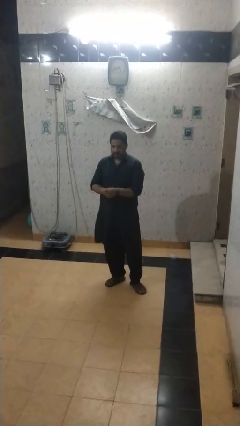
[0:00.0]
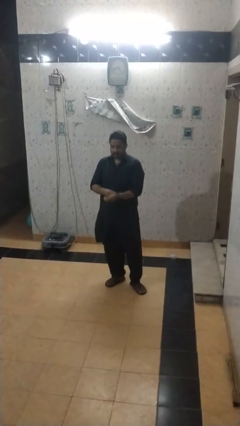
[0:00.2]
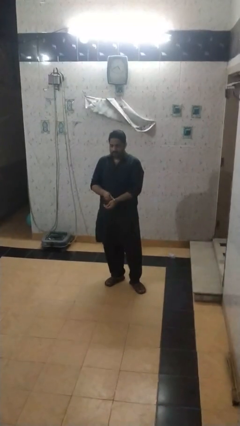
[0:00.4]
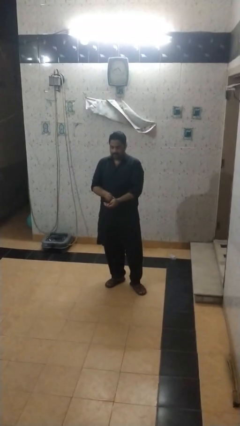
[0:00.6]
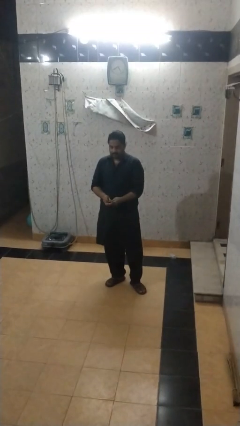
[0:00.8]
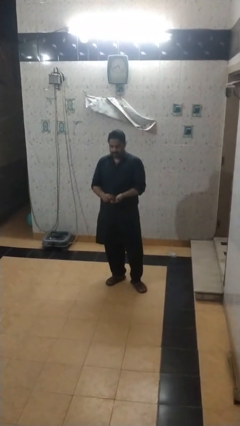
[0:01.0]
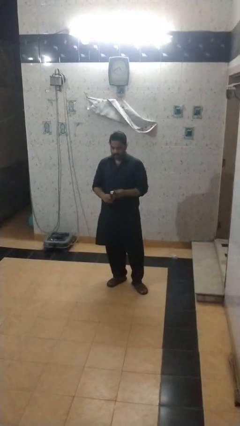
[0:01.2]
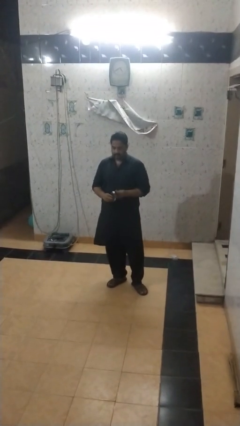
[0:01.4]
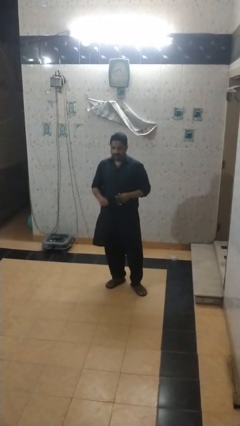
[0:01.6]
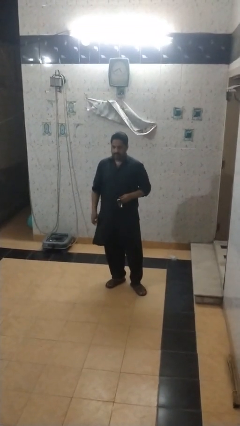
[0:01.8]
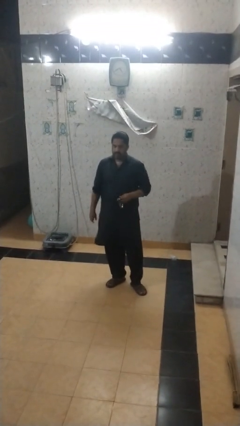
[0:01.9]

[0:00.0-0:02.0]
person takes off wristwatch

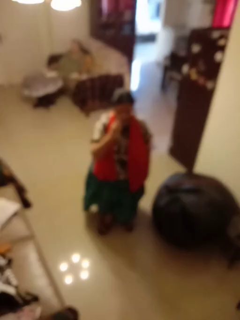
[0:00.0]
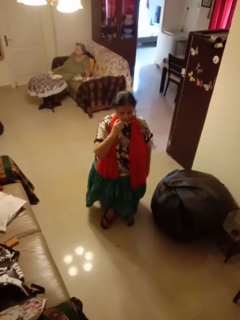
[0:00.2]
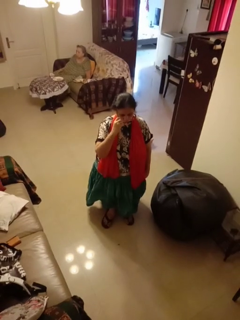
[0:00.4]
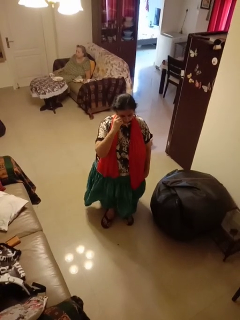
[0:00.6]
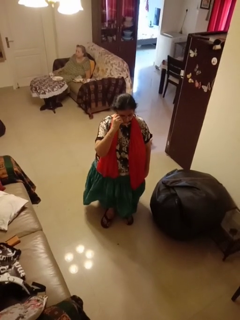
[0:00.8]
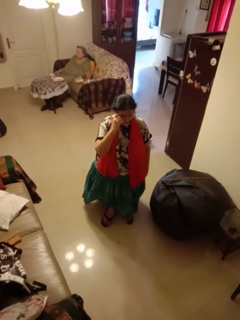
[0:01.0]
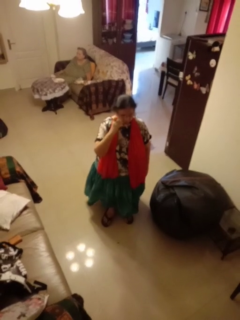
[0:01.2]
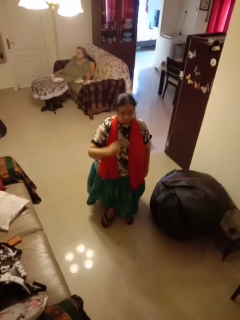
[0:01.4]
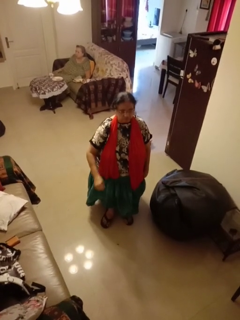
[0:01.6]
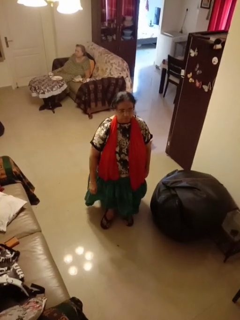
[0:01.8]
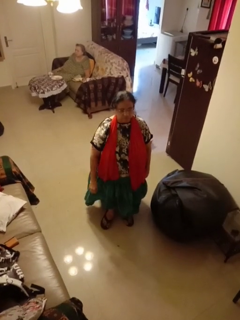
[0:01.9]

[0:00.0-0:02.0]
person puts on glasses

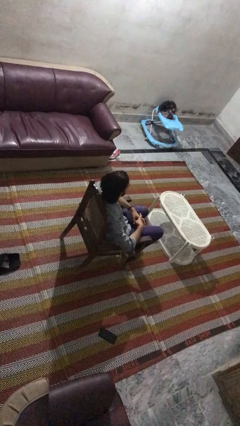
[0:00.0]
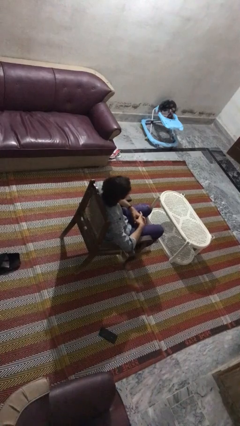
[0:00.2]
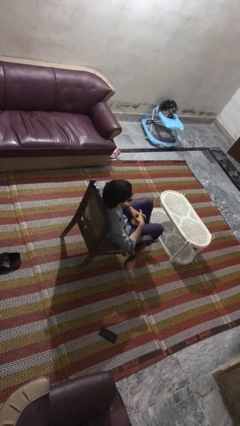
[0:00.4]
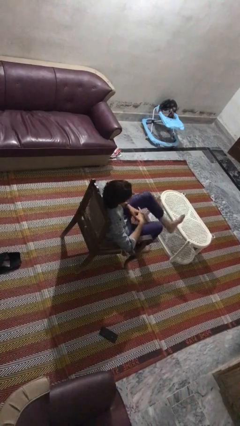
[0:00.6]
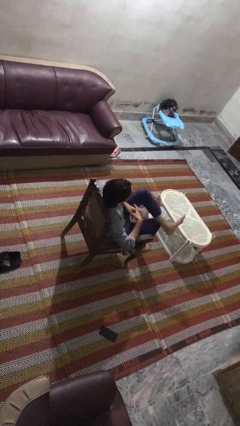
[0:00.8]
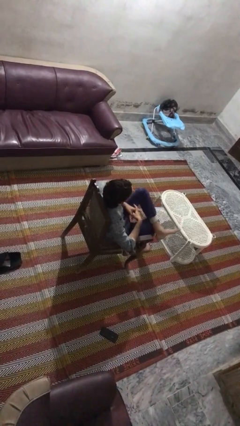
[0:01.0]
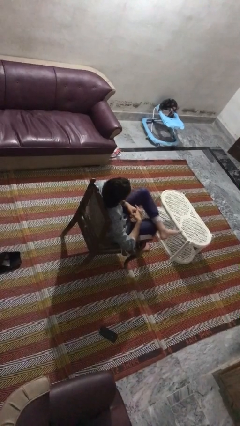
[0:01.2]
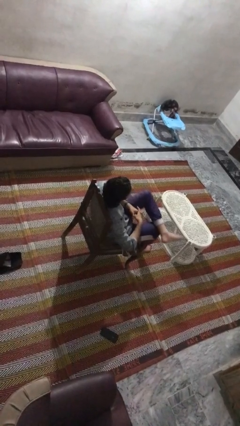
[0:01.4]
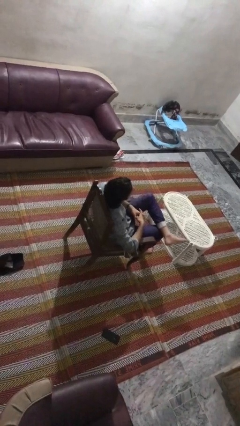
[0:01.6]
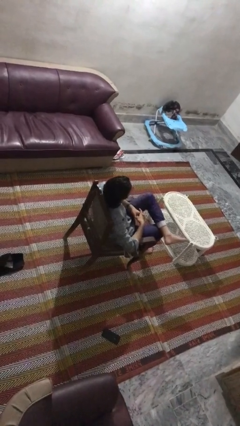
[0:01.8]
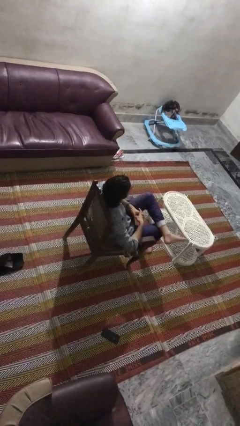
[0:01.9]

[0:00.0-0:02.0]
person crosses legs

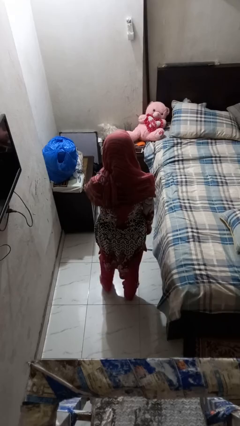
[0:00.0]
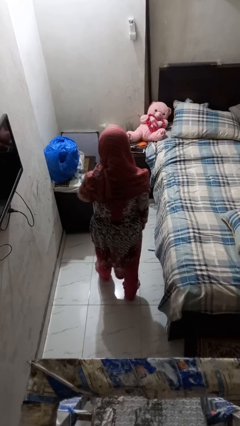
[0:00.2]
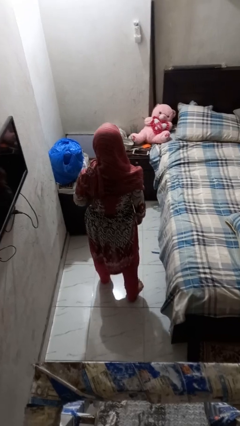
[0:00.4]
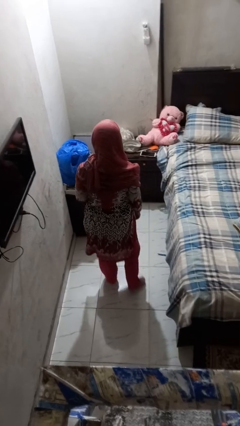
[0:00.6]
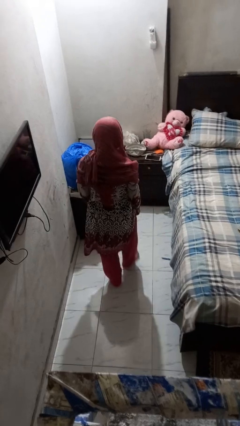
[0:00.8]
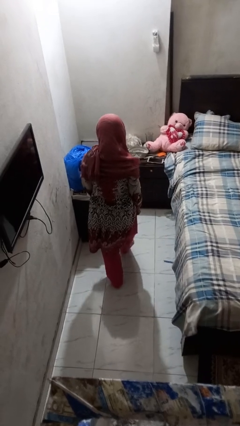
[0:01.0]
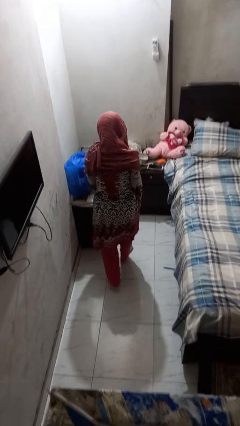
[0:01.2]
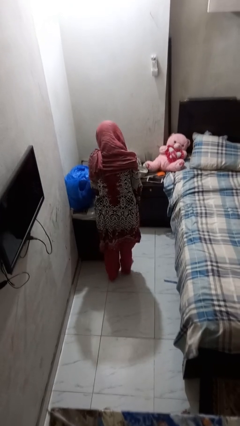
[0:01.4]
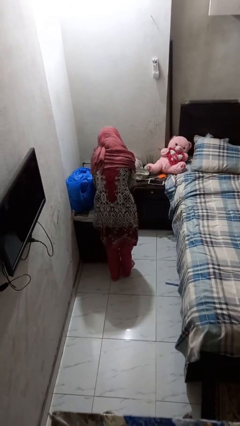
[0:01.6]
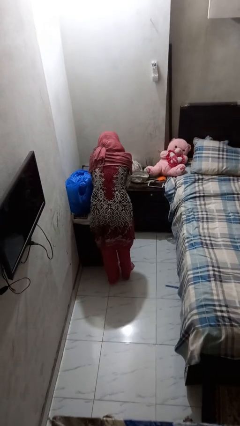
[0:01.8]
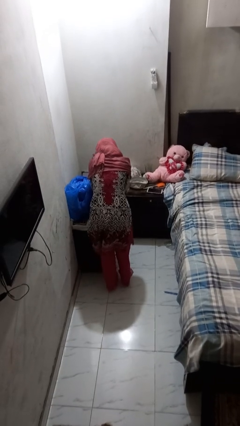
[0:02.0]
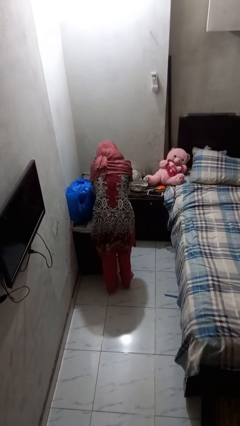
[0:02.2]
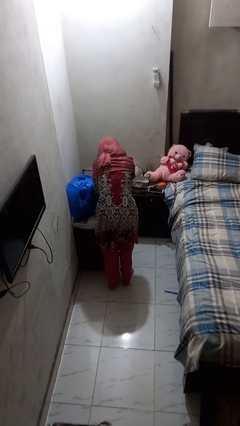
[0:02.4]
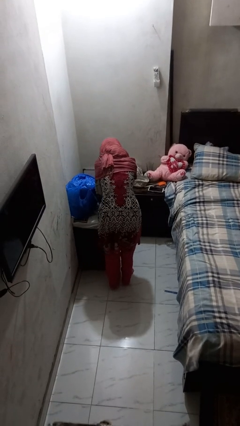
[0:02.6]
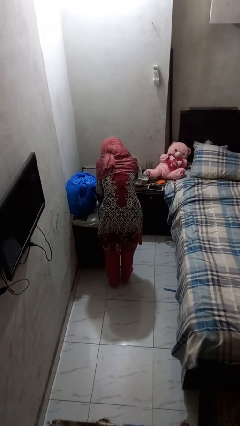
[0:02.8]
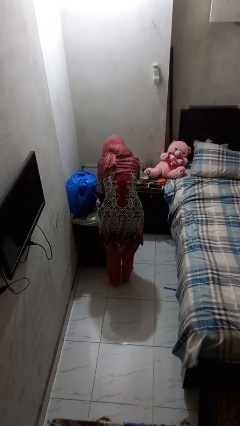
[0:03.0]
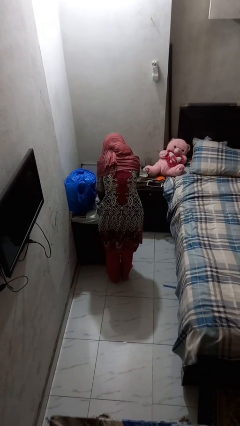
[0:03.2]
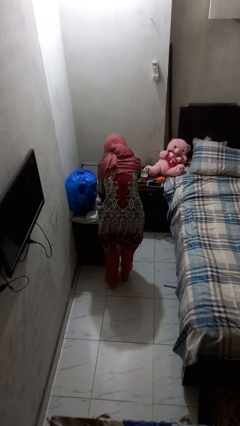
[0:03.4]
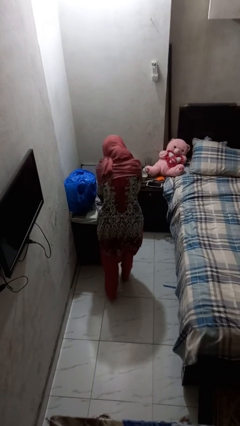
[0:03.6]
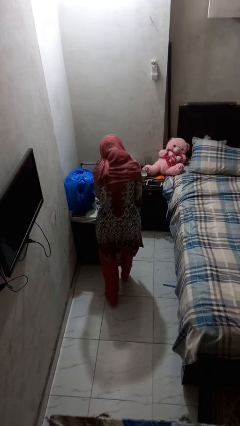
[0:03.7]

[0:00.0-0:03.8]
person bumps into table

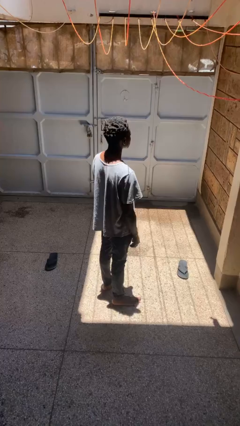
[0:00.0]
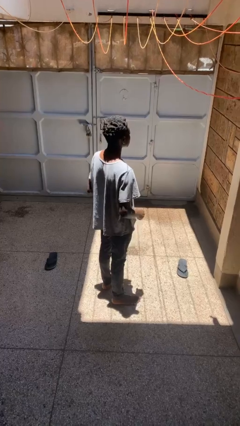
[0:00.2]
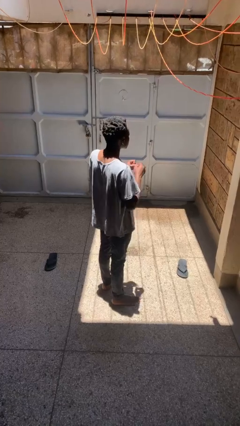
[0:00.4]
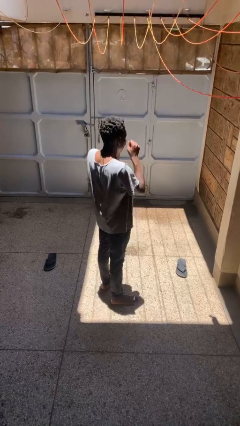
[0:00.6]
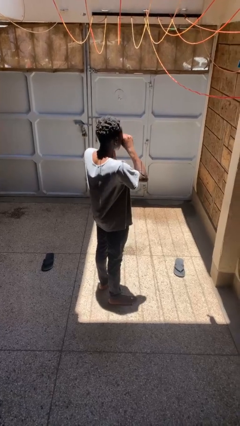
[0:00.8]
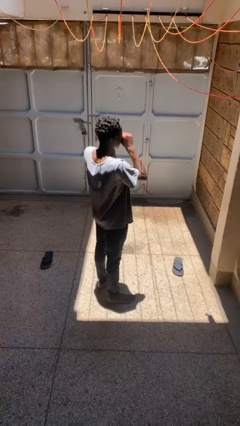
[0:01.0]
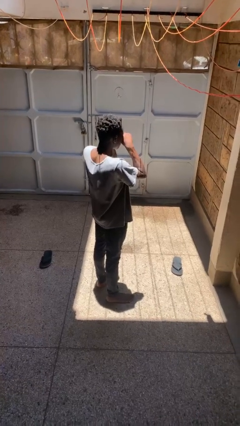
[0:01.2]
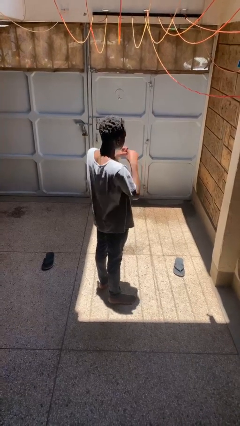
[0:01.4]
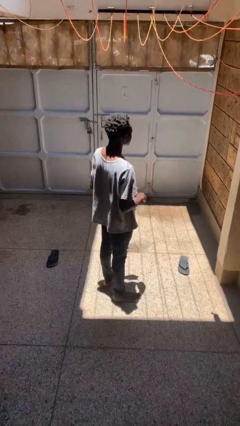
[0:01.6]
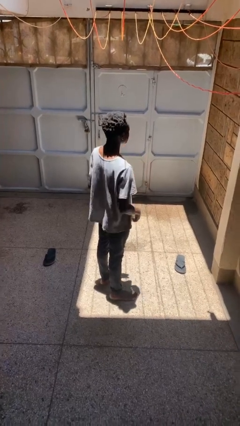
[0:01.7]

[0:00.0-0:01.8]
person rubs eyes

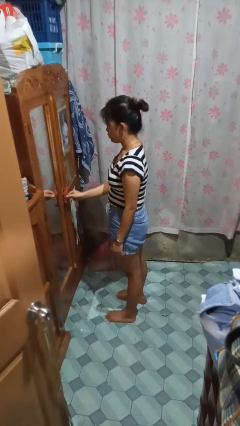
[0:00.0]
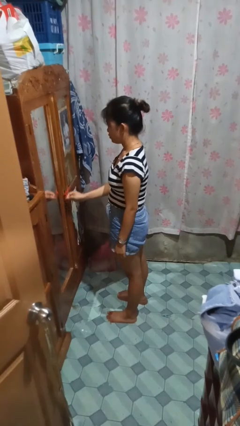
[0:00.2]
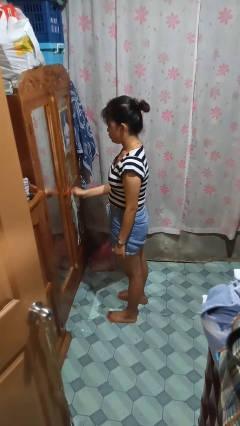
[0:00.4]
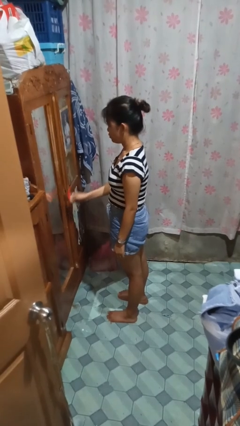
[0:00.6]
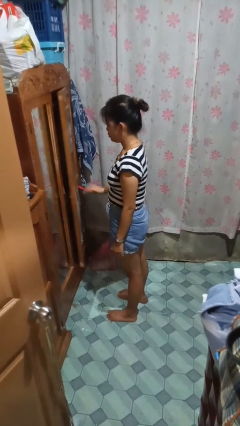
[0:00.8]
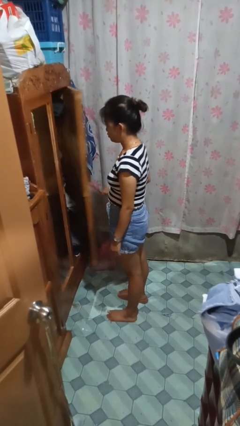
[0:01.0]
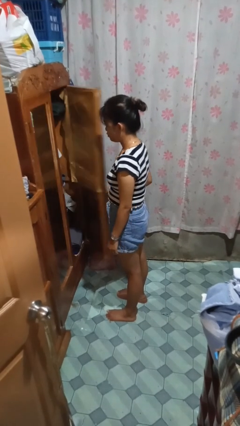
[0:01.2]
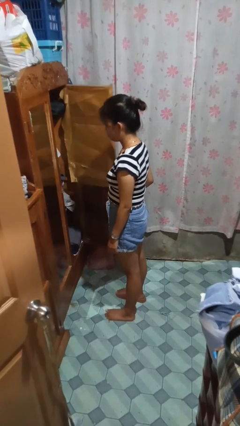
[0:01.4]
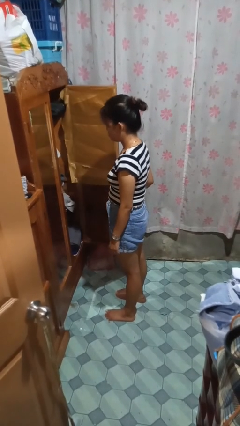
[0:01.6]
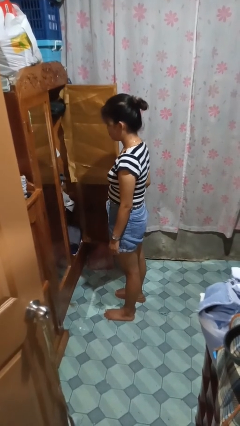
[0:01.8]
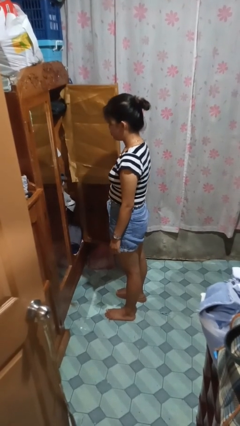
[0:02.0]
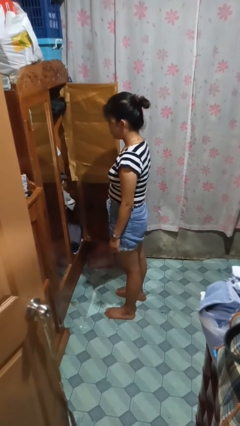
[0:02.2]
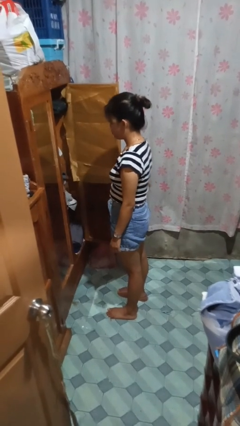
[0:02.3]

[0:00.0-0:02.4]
person opens closet door

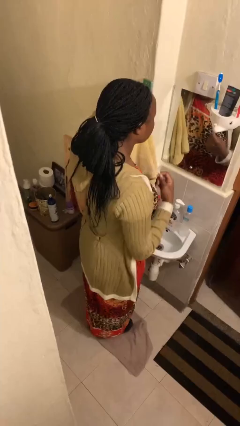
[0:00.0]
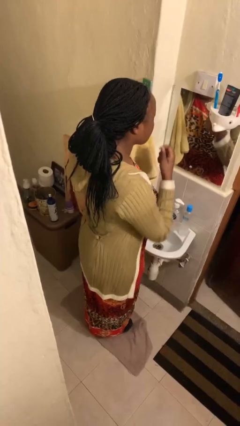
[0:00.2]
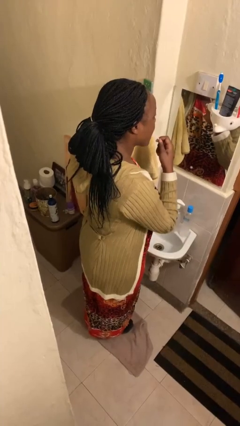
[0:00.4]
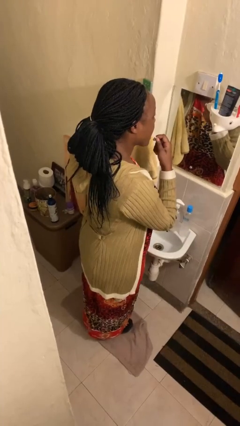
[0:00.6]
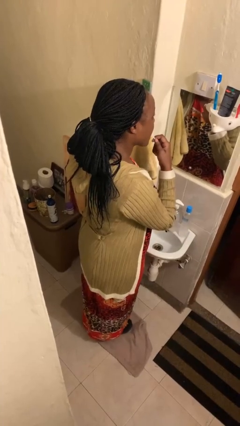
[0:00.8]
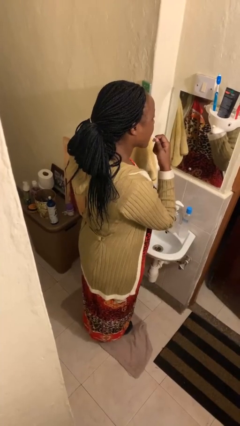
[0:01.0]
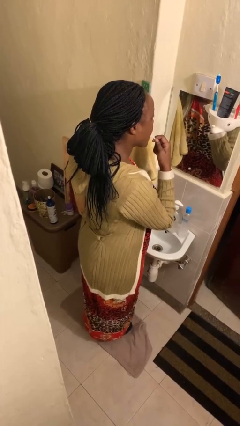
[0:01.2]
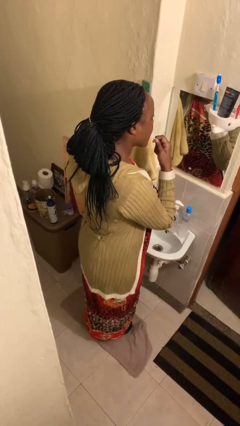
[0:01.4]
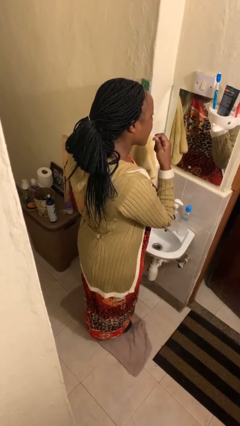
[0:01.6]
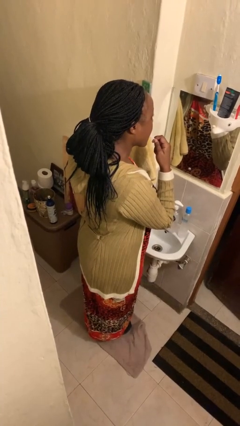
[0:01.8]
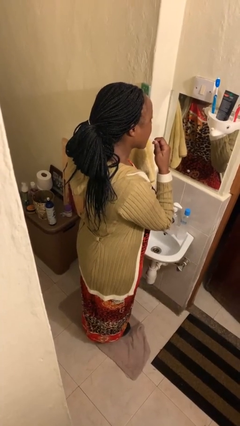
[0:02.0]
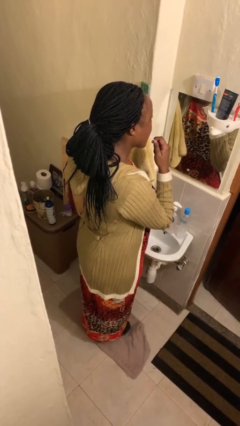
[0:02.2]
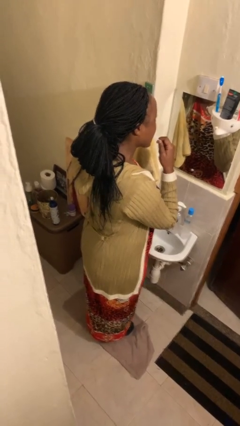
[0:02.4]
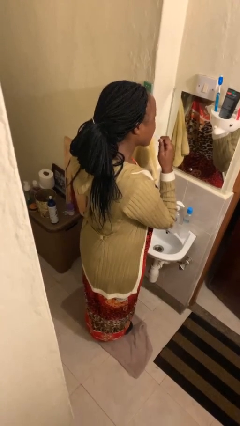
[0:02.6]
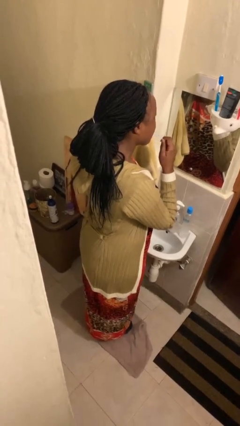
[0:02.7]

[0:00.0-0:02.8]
person flosses

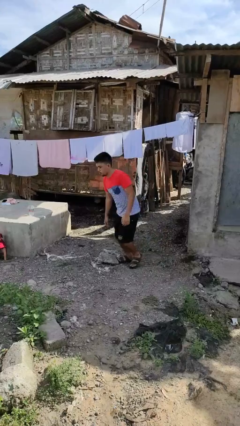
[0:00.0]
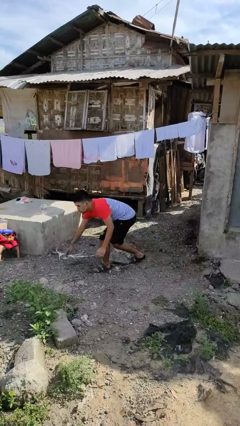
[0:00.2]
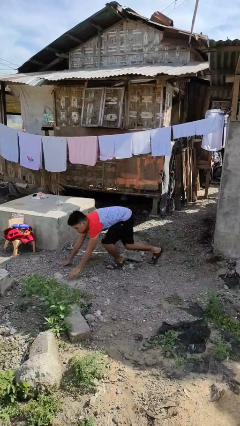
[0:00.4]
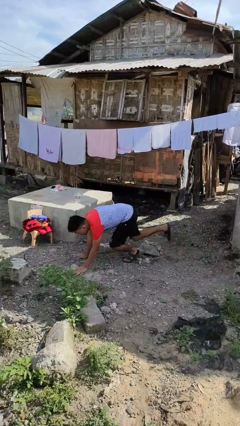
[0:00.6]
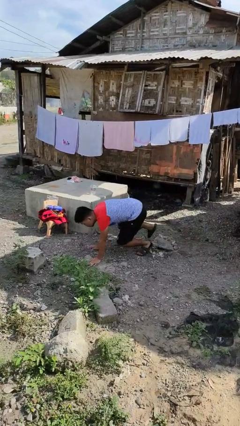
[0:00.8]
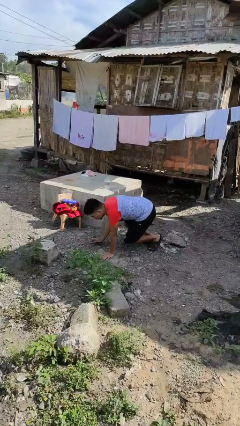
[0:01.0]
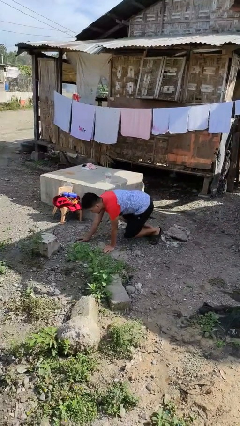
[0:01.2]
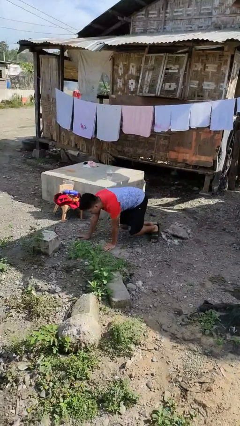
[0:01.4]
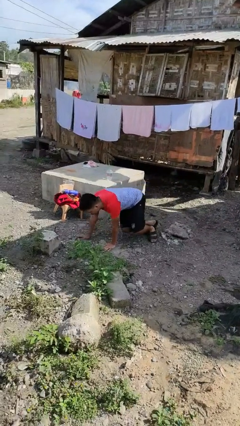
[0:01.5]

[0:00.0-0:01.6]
person trips on object on floor
